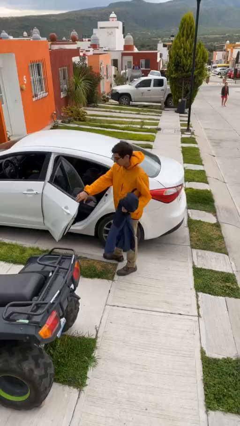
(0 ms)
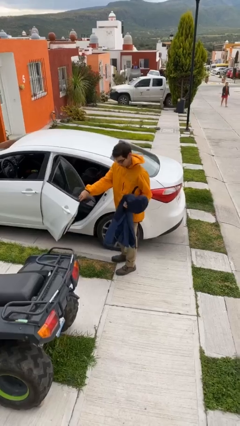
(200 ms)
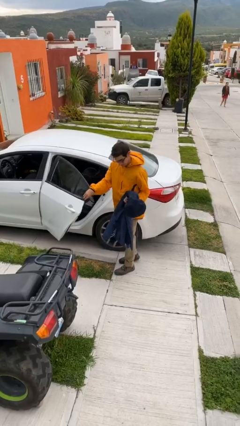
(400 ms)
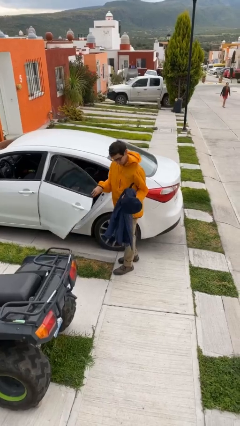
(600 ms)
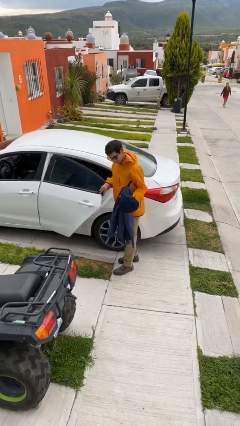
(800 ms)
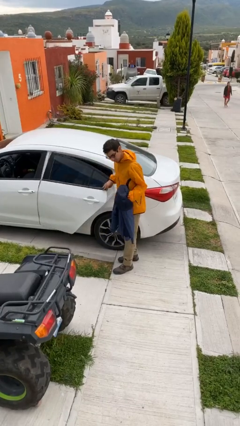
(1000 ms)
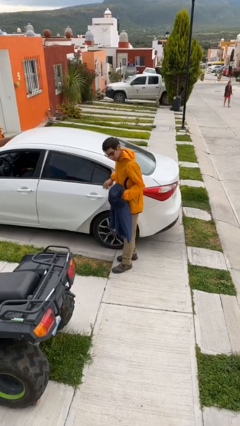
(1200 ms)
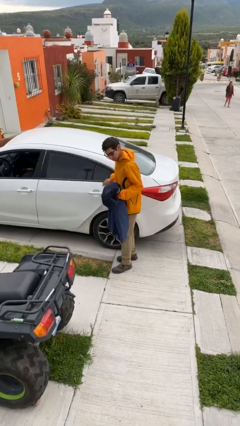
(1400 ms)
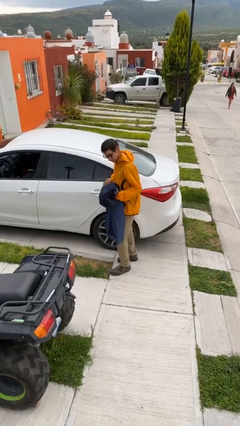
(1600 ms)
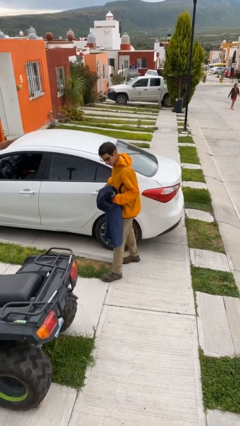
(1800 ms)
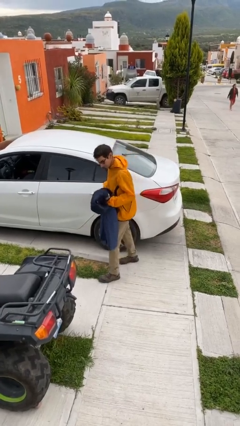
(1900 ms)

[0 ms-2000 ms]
person closes car door

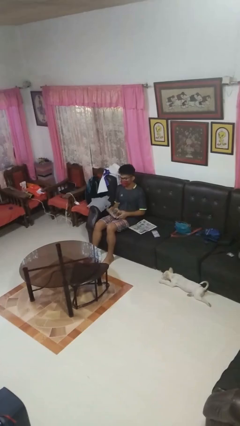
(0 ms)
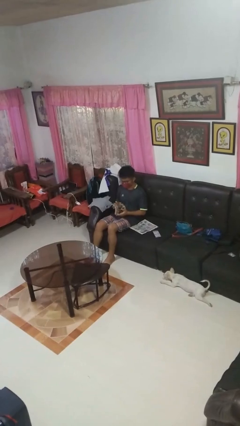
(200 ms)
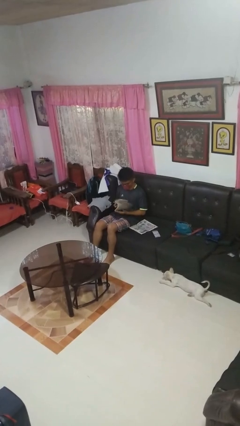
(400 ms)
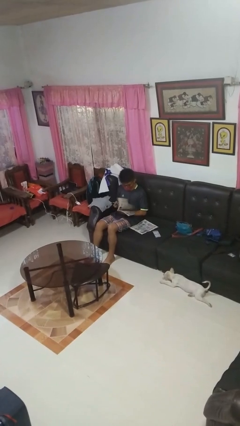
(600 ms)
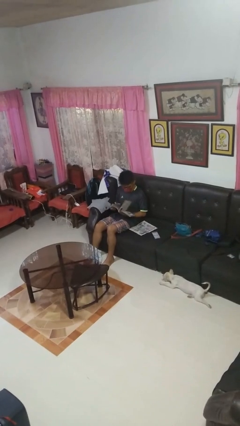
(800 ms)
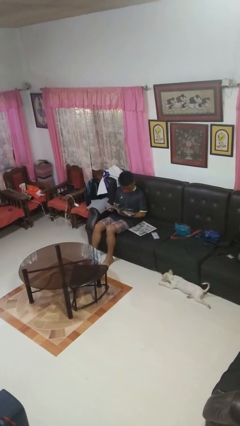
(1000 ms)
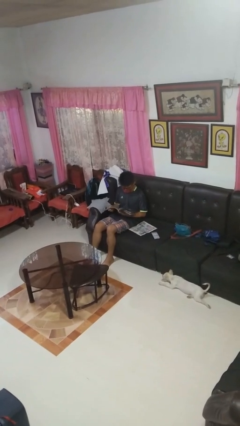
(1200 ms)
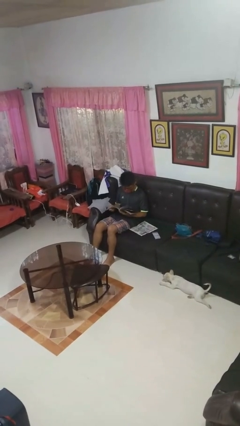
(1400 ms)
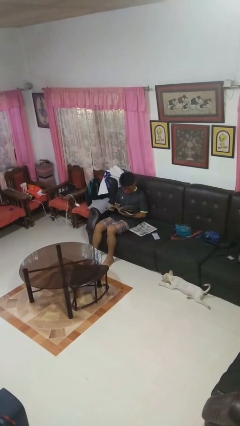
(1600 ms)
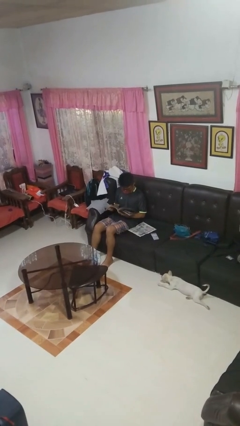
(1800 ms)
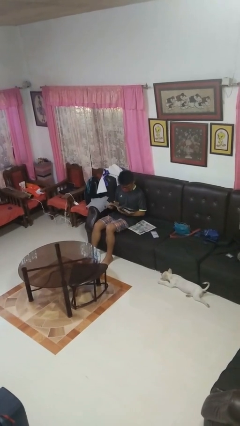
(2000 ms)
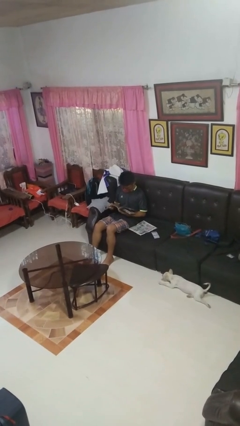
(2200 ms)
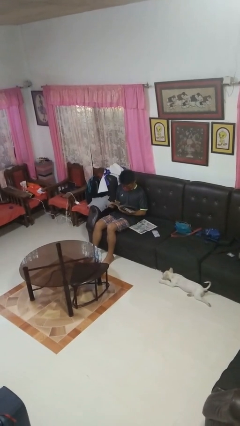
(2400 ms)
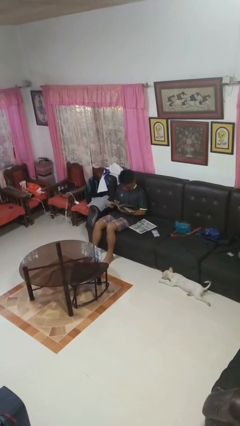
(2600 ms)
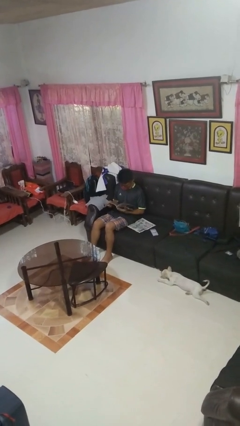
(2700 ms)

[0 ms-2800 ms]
person reads magazine

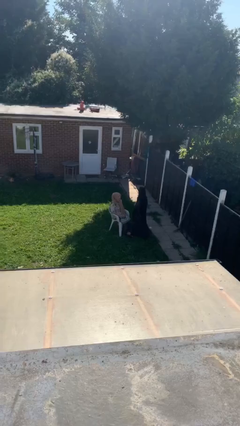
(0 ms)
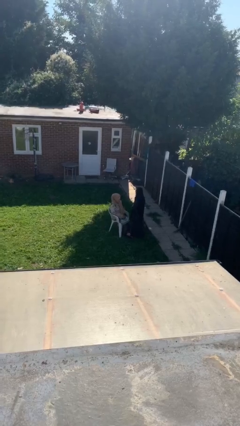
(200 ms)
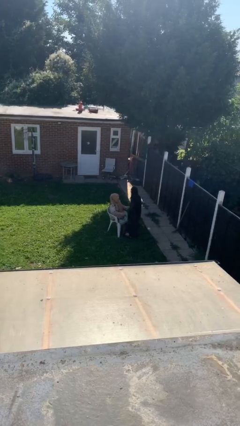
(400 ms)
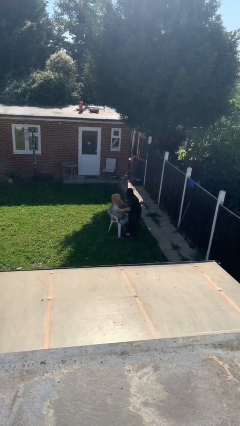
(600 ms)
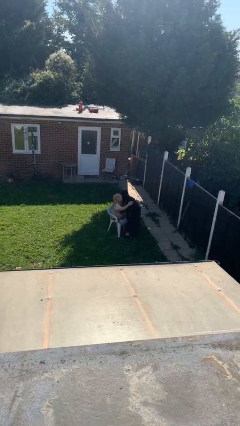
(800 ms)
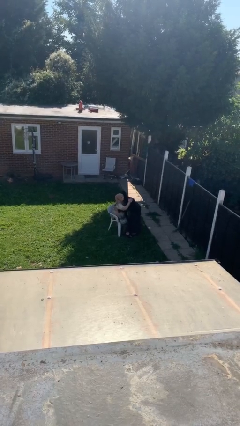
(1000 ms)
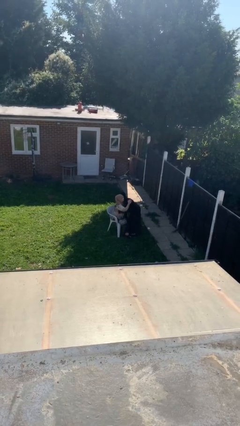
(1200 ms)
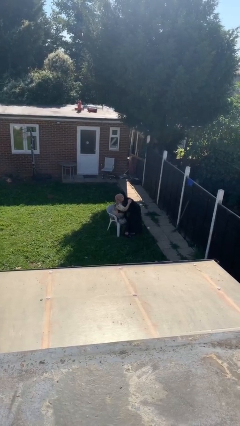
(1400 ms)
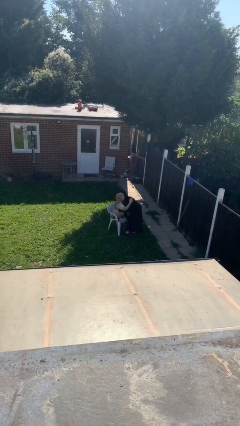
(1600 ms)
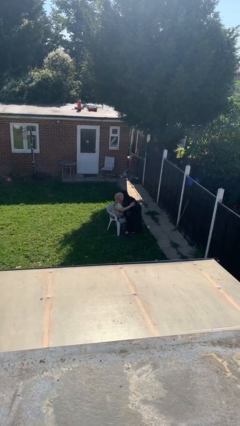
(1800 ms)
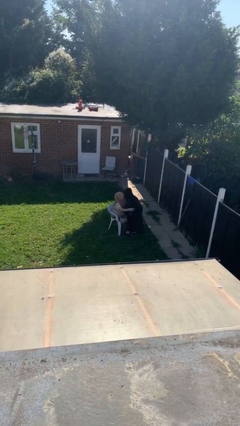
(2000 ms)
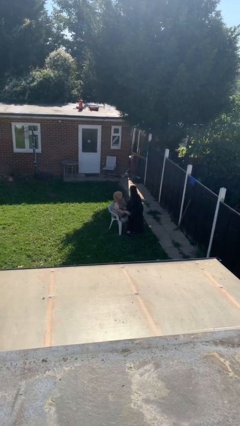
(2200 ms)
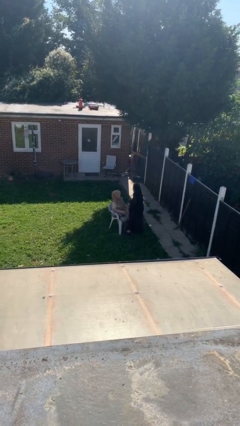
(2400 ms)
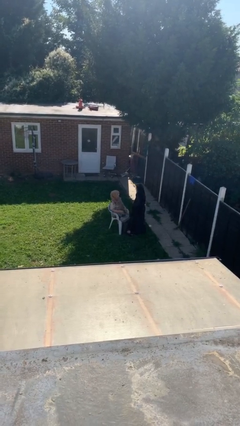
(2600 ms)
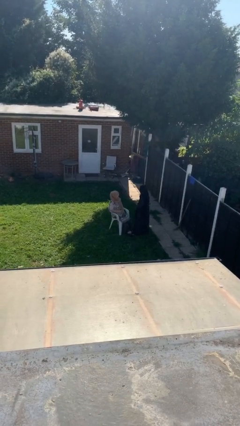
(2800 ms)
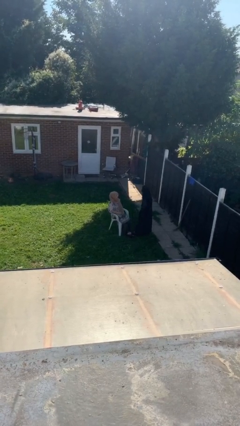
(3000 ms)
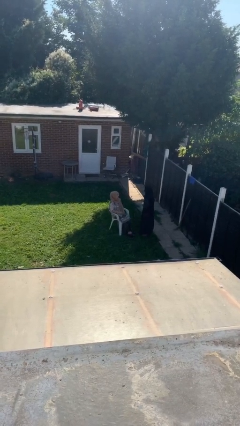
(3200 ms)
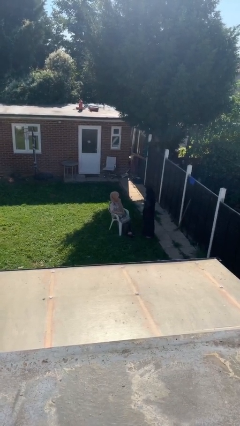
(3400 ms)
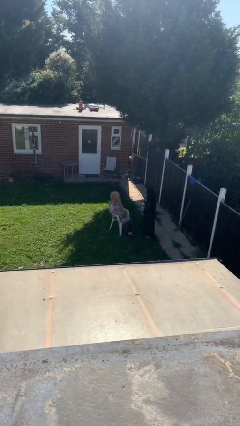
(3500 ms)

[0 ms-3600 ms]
person embraces person

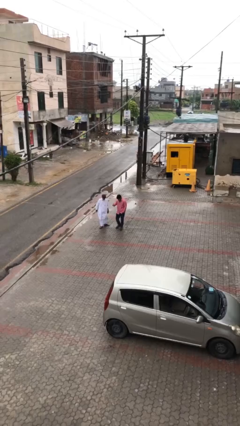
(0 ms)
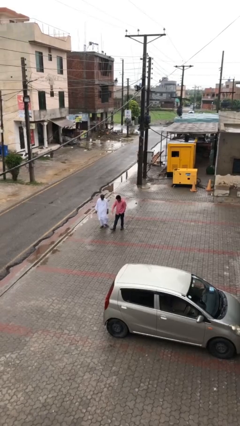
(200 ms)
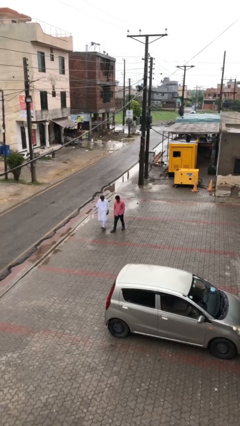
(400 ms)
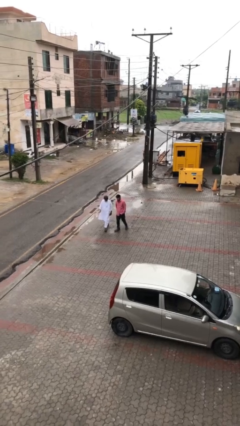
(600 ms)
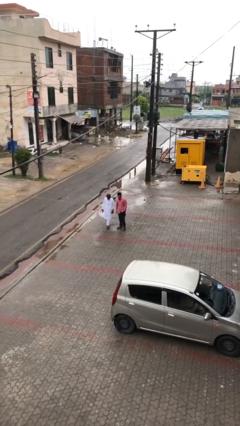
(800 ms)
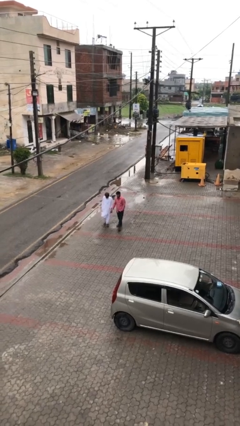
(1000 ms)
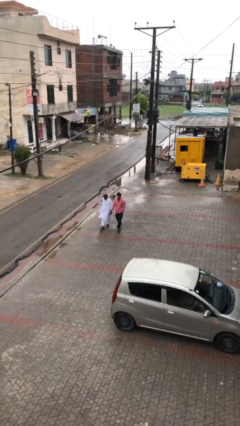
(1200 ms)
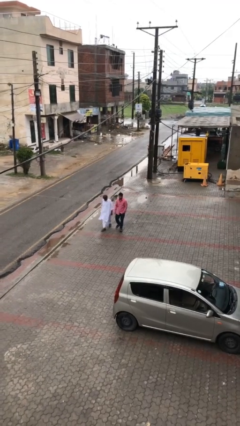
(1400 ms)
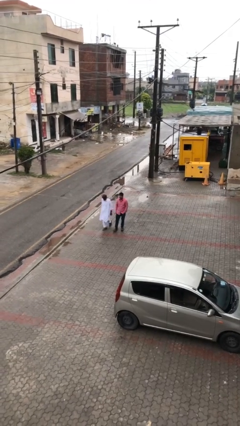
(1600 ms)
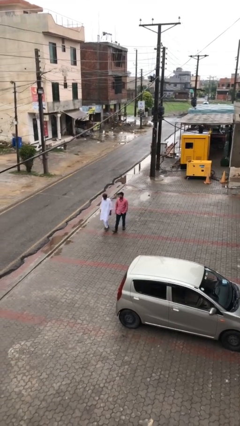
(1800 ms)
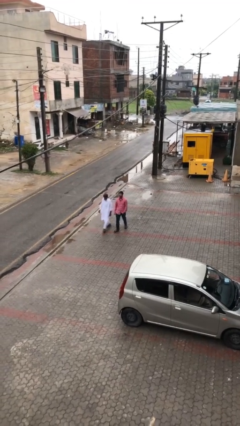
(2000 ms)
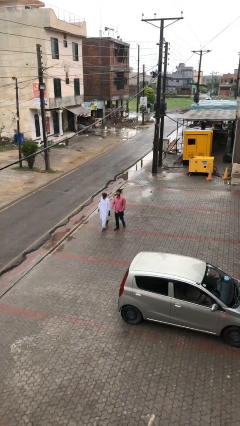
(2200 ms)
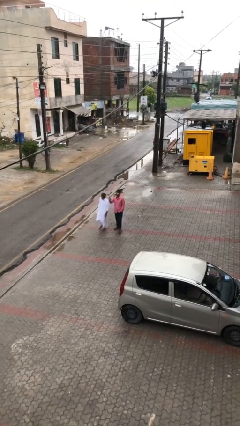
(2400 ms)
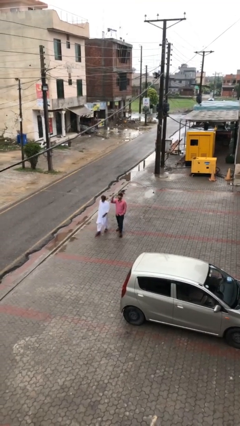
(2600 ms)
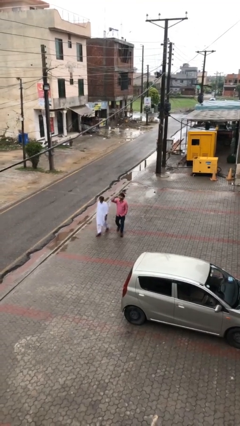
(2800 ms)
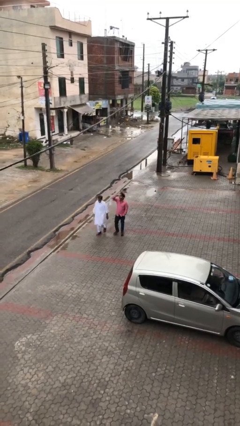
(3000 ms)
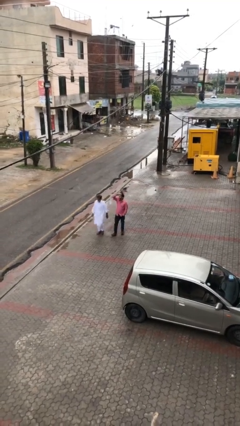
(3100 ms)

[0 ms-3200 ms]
person talks to person

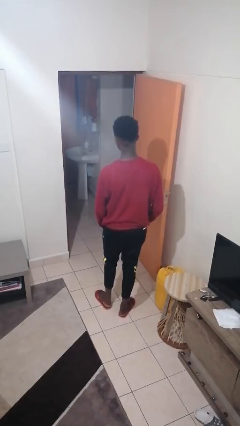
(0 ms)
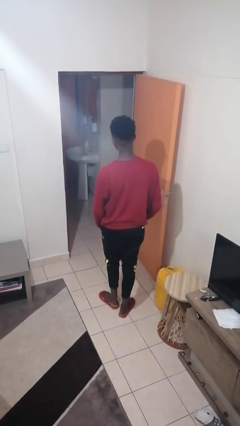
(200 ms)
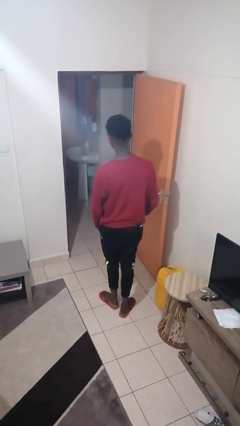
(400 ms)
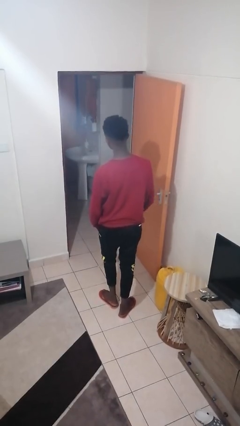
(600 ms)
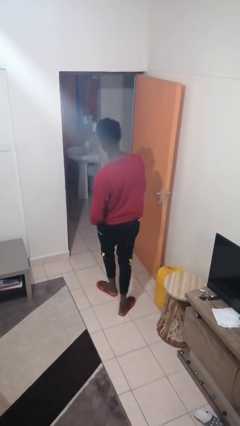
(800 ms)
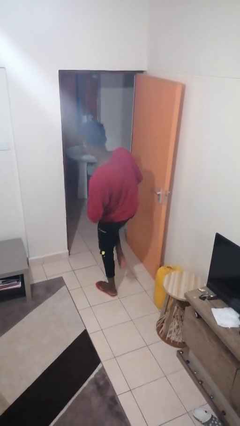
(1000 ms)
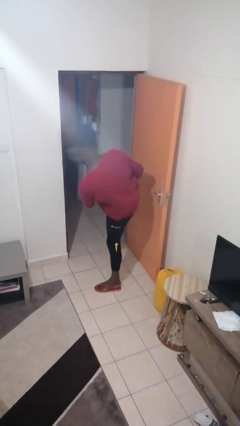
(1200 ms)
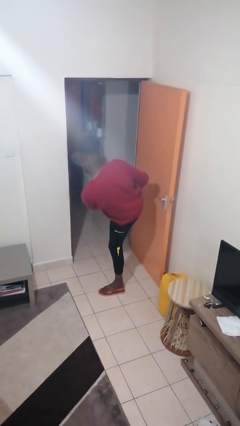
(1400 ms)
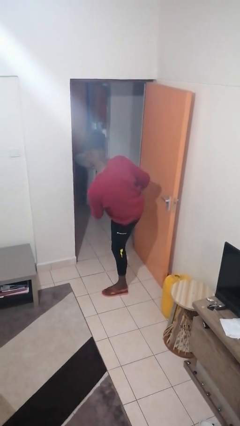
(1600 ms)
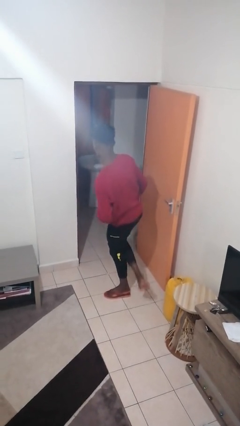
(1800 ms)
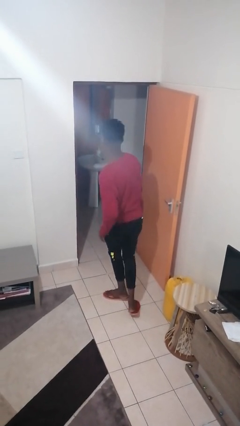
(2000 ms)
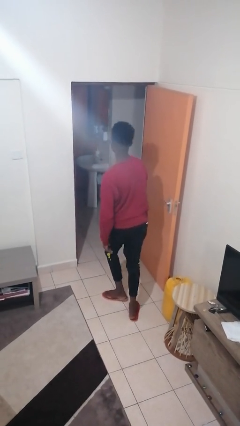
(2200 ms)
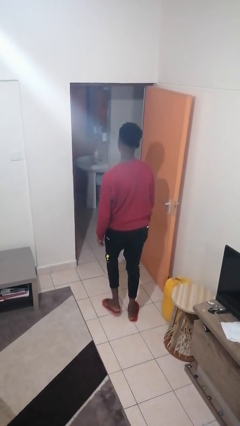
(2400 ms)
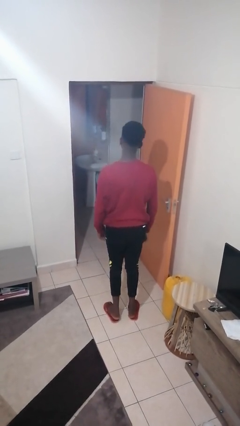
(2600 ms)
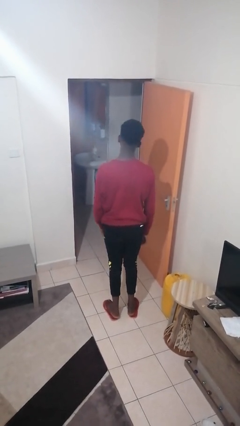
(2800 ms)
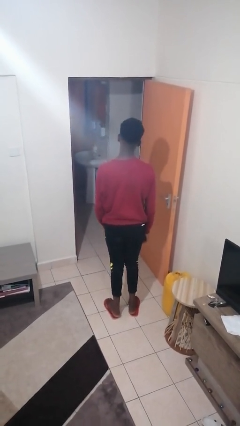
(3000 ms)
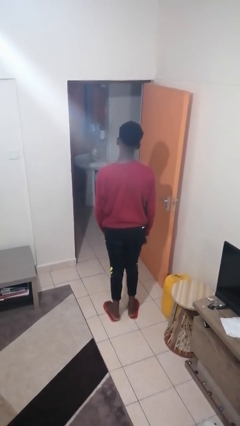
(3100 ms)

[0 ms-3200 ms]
person karate kicks

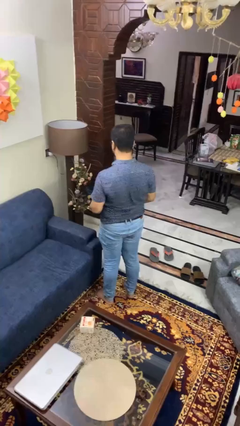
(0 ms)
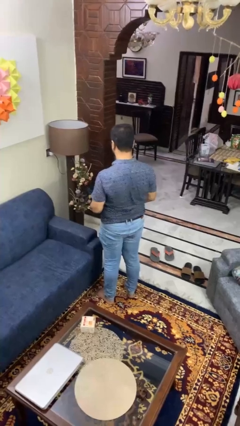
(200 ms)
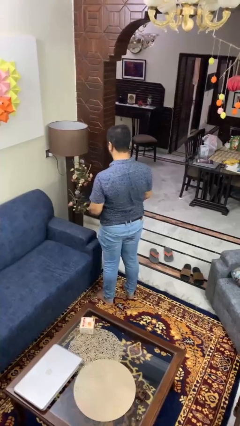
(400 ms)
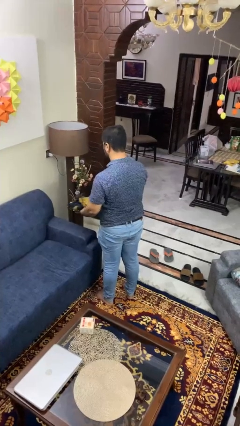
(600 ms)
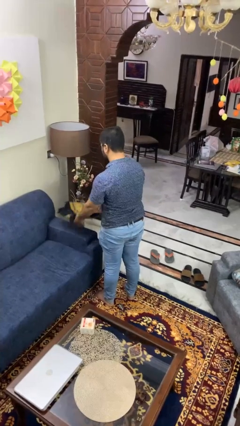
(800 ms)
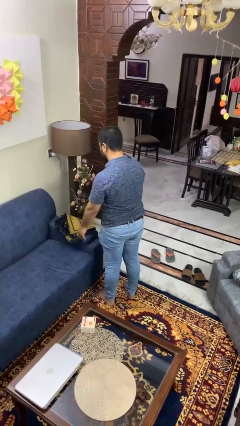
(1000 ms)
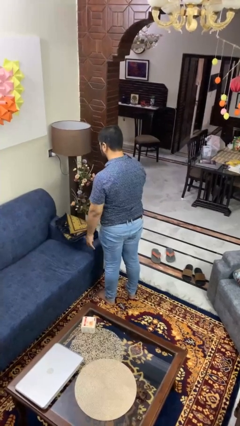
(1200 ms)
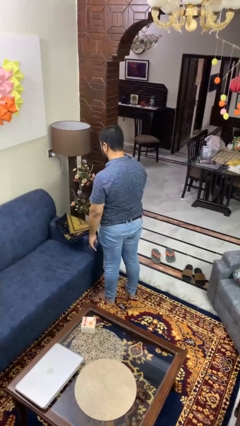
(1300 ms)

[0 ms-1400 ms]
person puts down object on couch

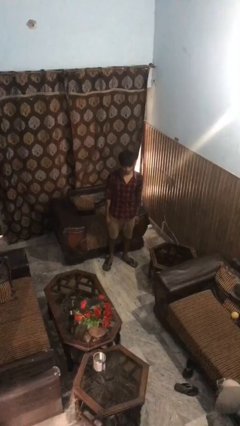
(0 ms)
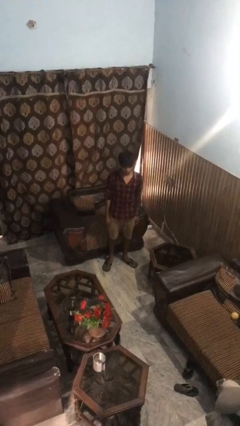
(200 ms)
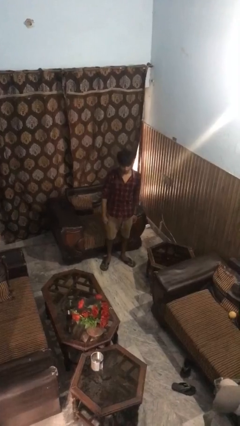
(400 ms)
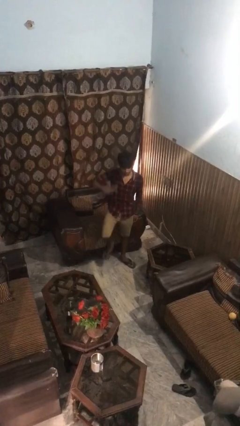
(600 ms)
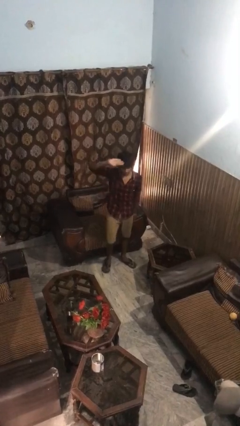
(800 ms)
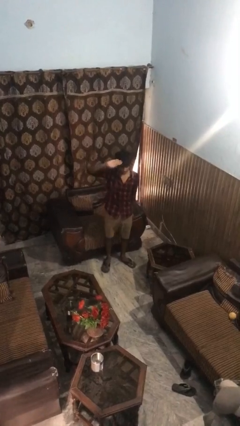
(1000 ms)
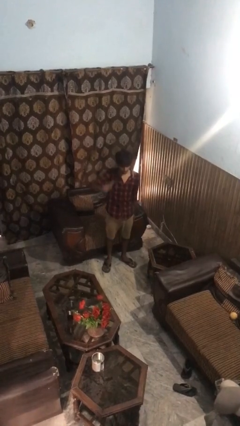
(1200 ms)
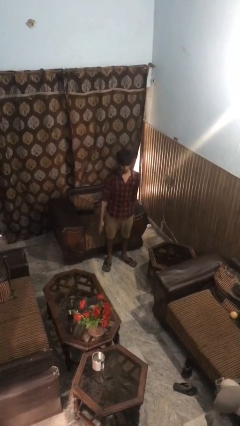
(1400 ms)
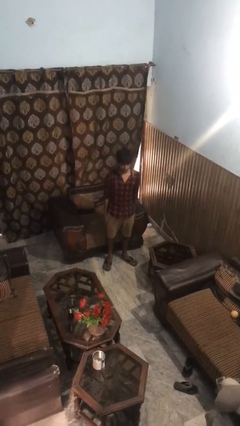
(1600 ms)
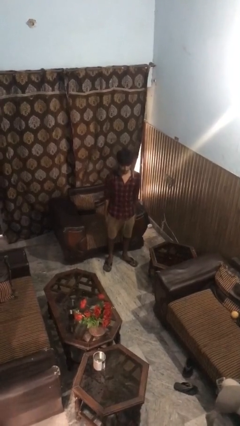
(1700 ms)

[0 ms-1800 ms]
person salutes
